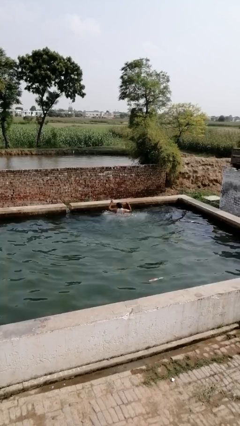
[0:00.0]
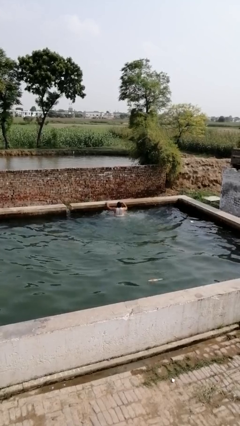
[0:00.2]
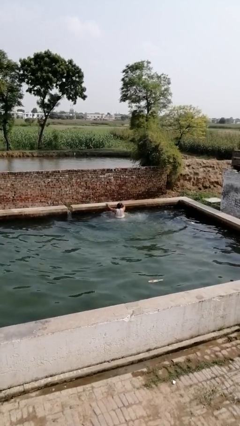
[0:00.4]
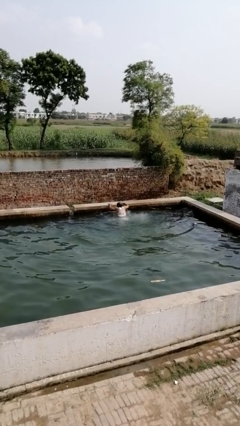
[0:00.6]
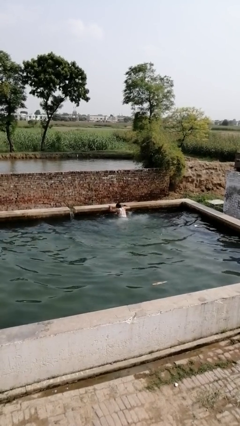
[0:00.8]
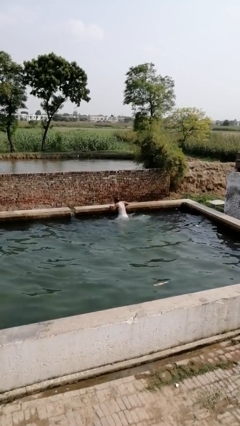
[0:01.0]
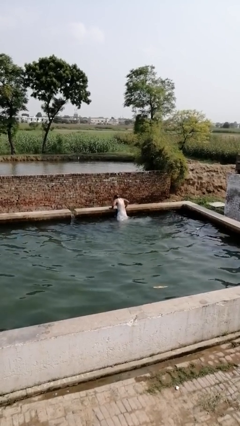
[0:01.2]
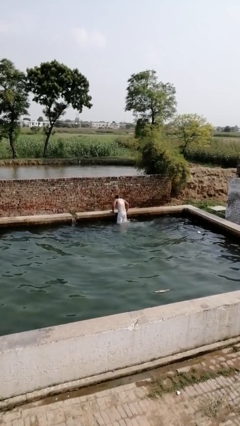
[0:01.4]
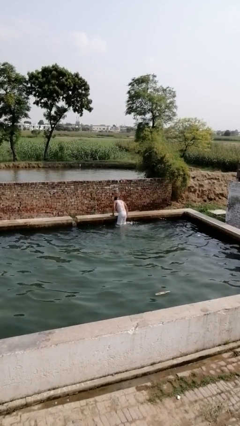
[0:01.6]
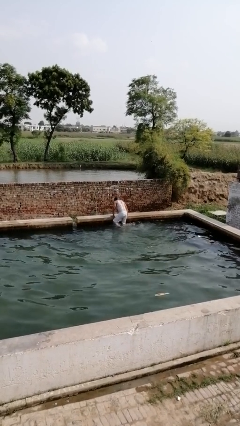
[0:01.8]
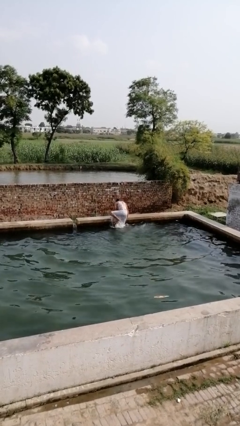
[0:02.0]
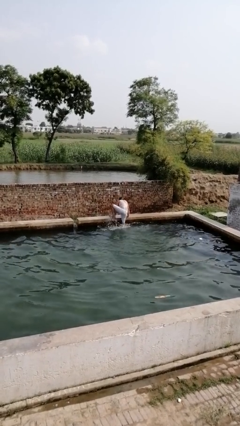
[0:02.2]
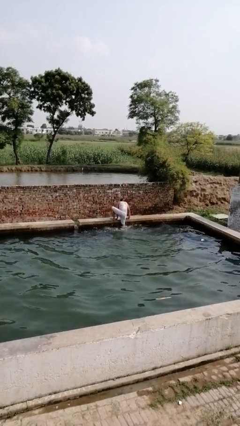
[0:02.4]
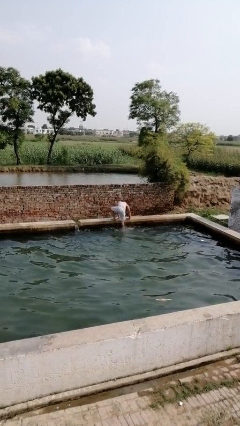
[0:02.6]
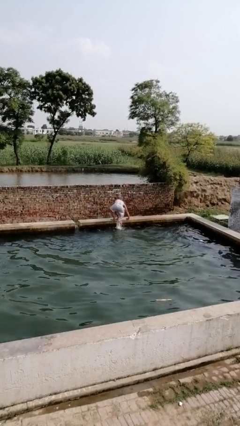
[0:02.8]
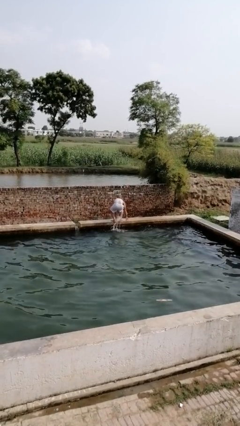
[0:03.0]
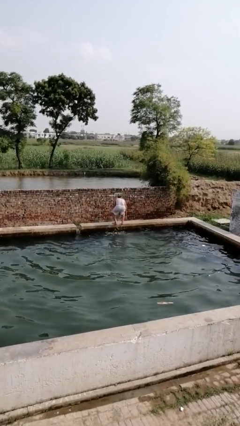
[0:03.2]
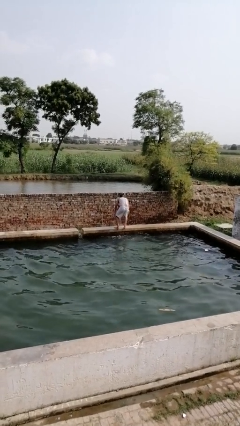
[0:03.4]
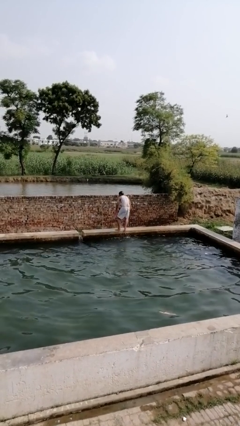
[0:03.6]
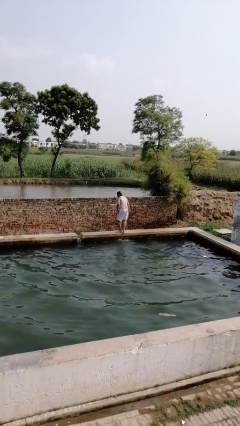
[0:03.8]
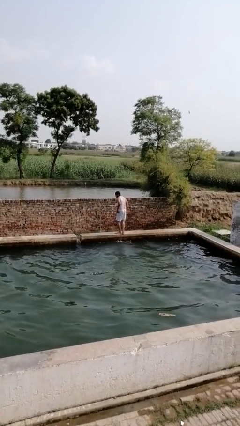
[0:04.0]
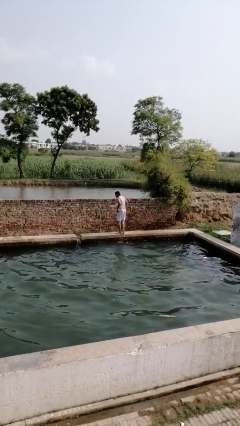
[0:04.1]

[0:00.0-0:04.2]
person exits pool

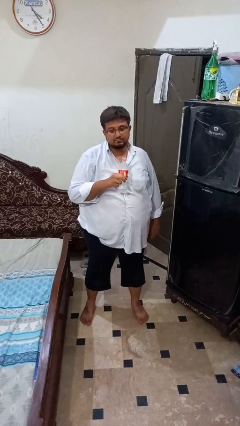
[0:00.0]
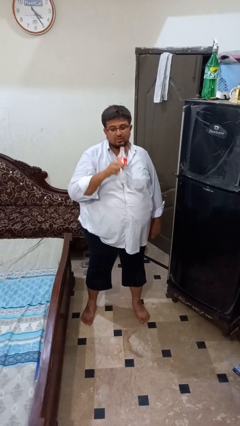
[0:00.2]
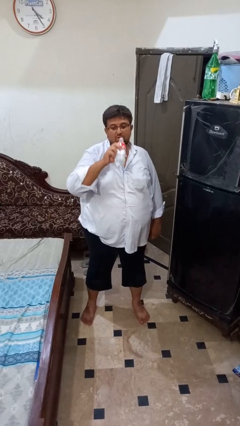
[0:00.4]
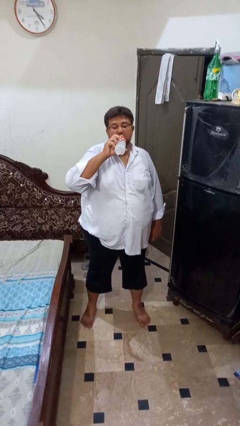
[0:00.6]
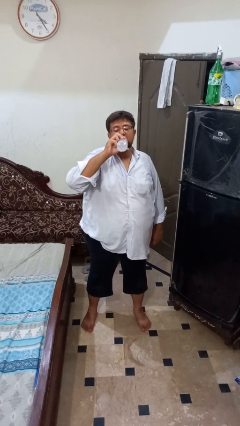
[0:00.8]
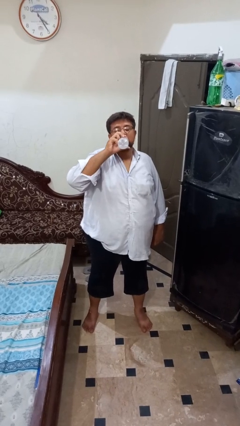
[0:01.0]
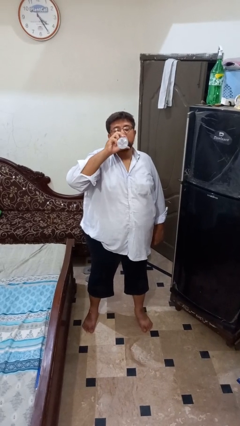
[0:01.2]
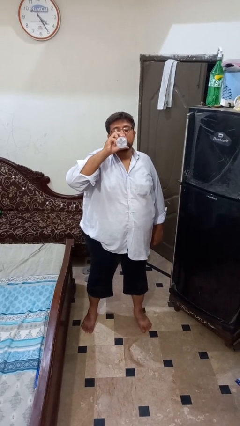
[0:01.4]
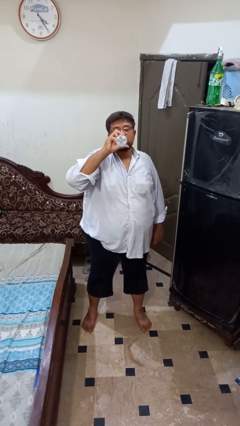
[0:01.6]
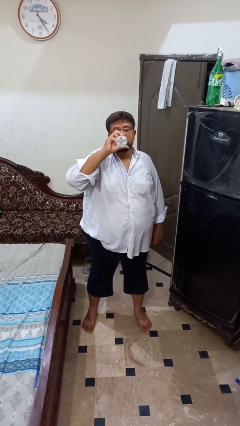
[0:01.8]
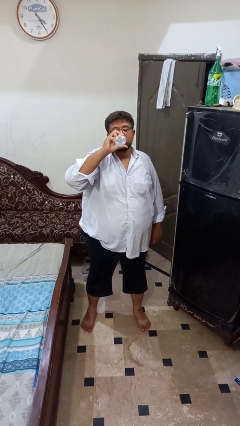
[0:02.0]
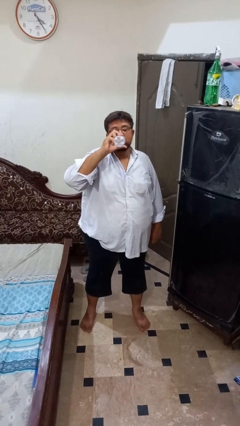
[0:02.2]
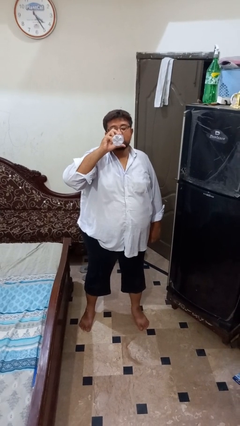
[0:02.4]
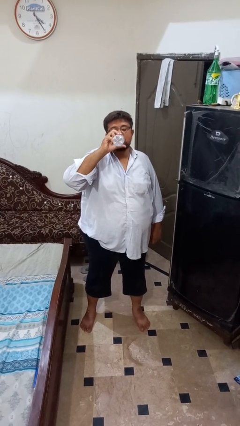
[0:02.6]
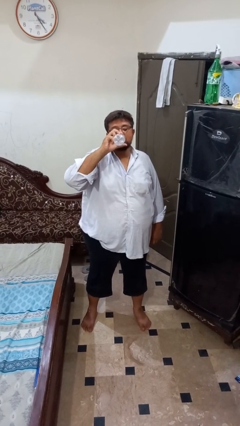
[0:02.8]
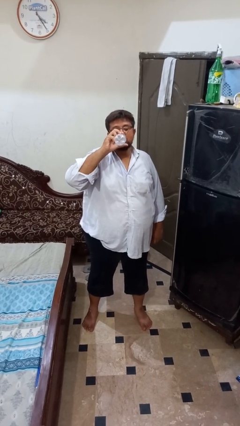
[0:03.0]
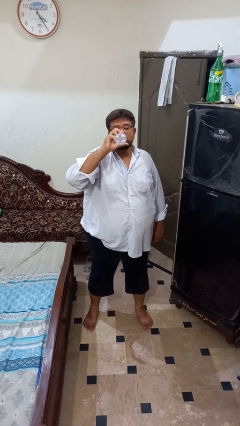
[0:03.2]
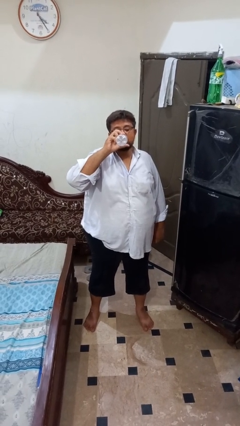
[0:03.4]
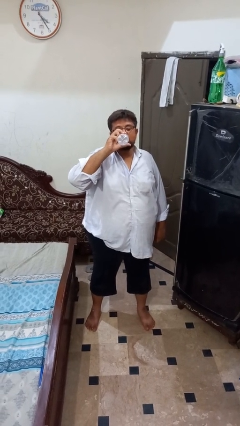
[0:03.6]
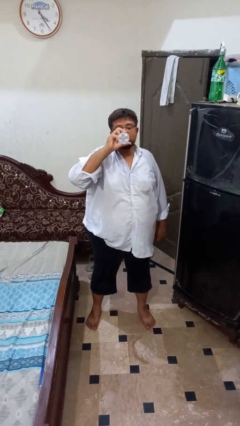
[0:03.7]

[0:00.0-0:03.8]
person drinks from bottle

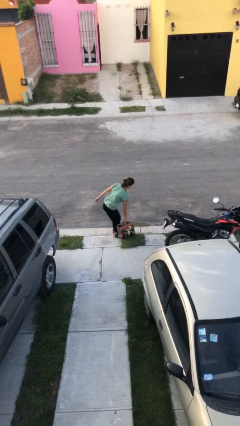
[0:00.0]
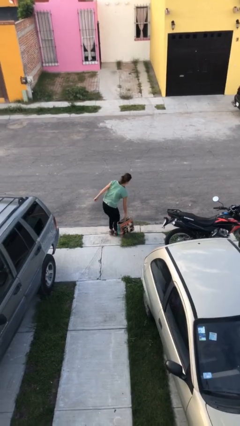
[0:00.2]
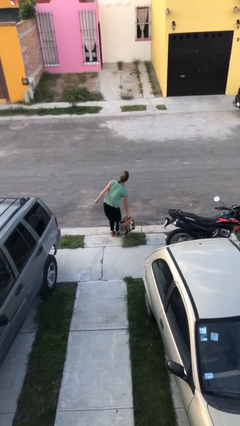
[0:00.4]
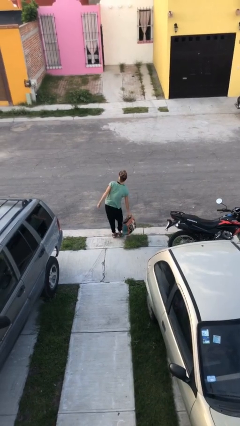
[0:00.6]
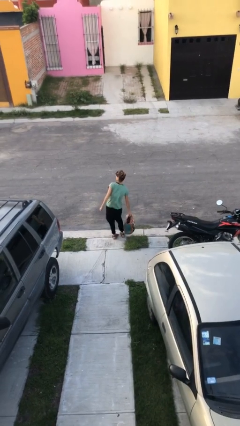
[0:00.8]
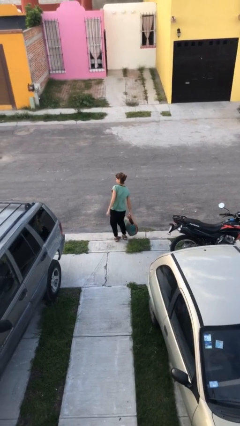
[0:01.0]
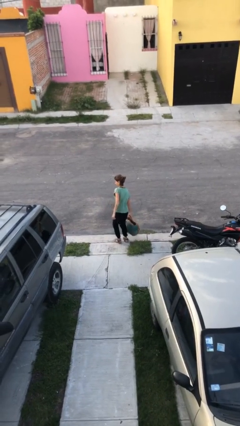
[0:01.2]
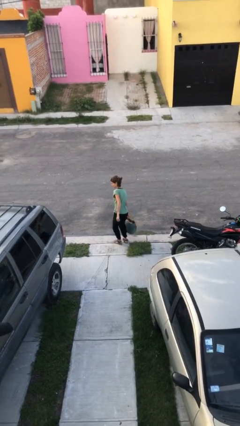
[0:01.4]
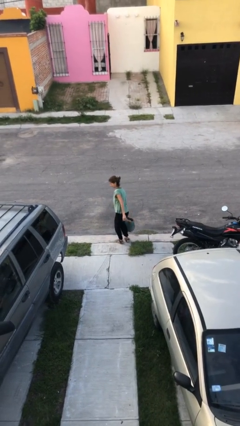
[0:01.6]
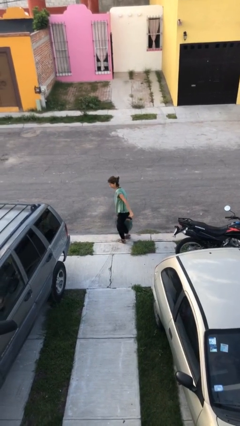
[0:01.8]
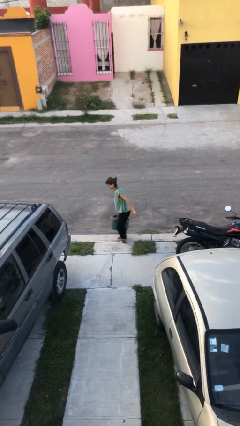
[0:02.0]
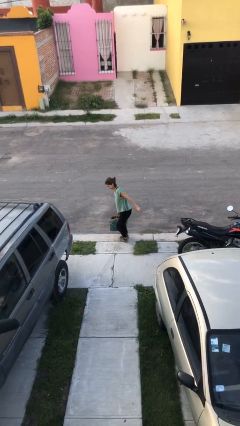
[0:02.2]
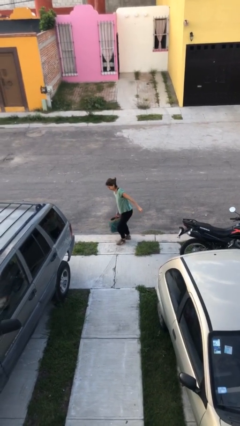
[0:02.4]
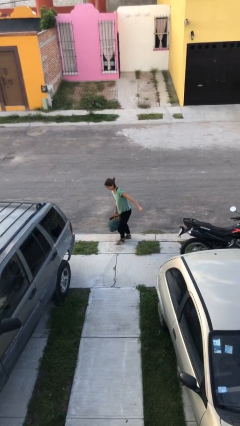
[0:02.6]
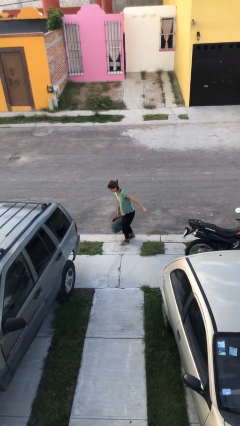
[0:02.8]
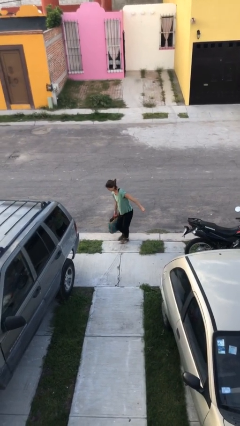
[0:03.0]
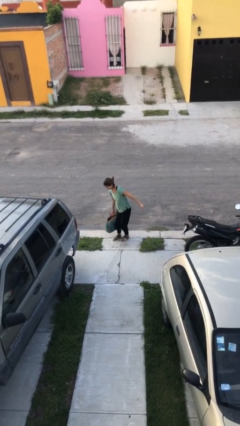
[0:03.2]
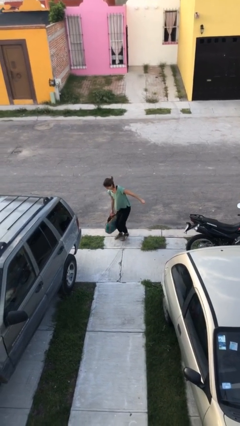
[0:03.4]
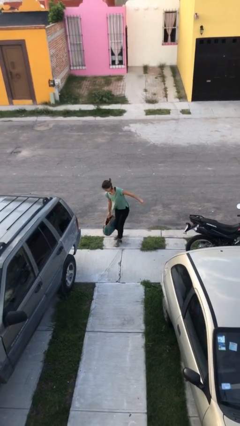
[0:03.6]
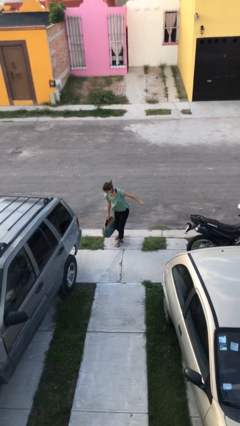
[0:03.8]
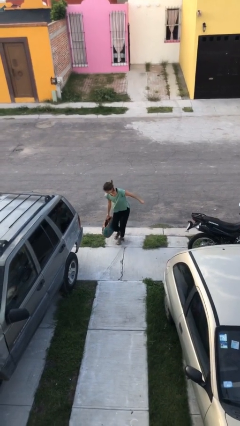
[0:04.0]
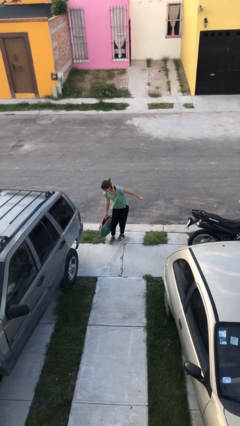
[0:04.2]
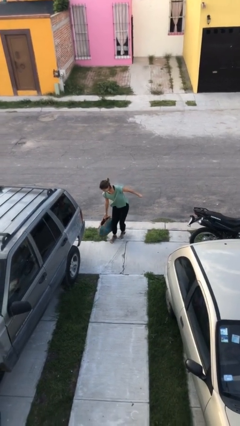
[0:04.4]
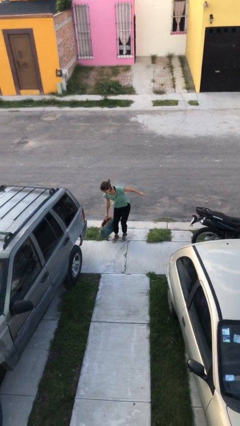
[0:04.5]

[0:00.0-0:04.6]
person carries heavy object

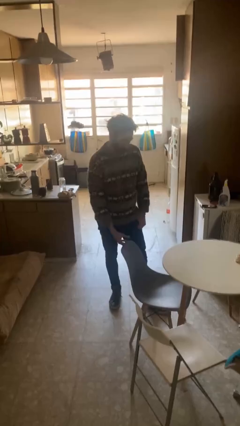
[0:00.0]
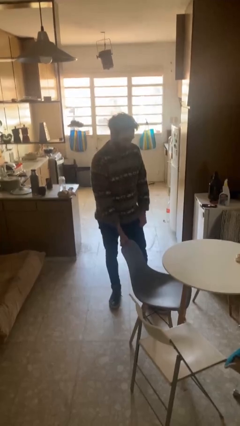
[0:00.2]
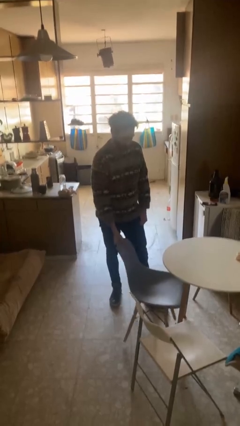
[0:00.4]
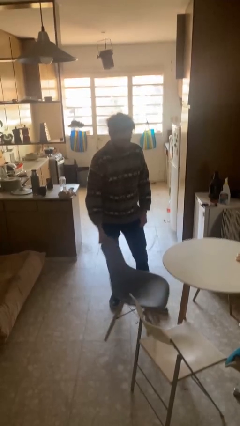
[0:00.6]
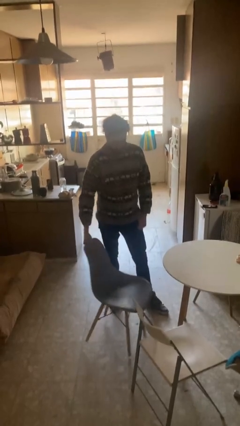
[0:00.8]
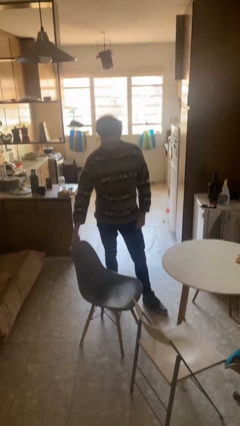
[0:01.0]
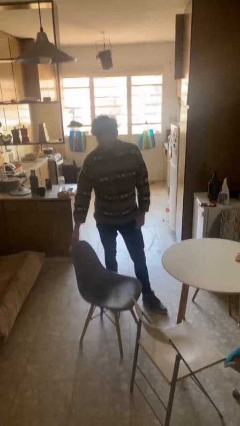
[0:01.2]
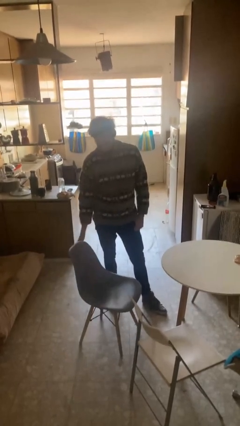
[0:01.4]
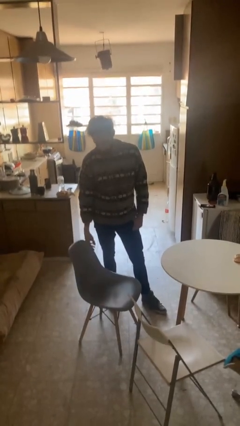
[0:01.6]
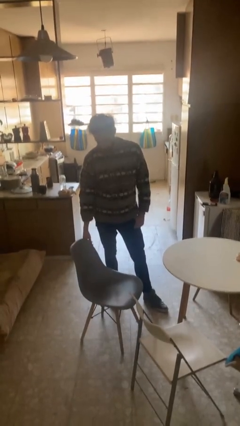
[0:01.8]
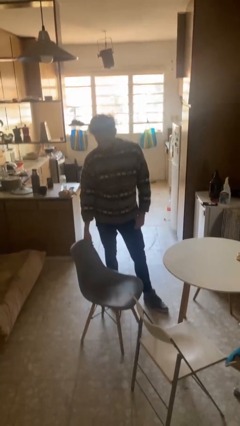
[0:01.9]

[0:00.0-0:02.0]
person pulls out chair

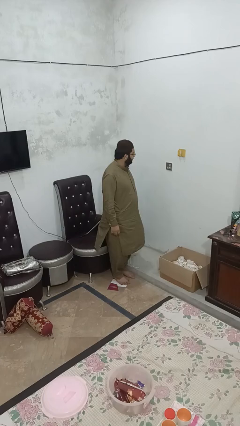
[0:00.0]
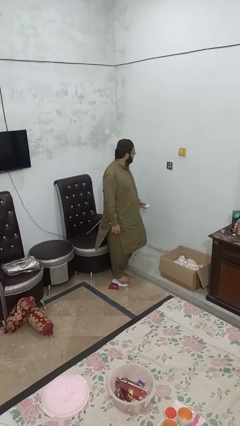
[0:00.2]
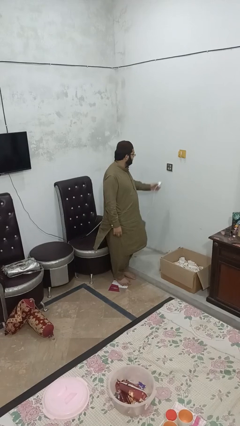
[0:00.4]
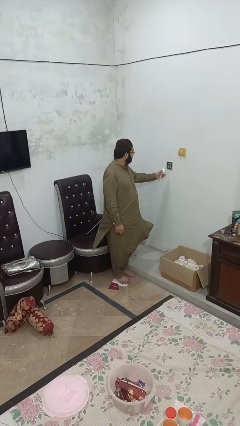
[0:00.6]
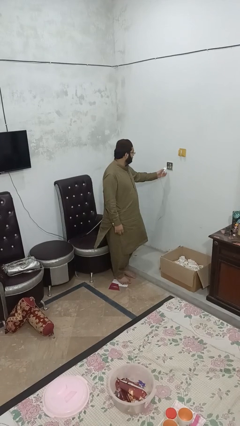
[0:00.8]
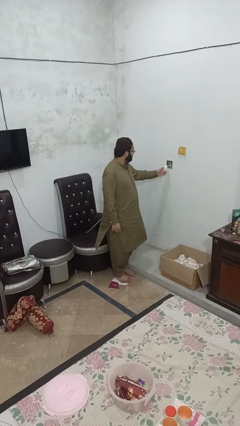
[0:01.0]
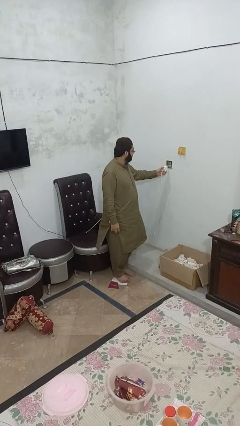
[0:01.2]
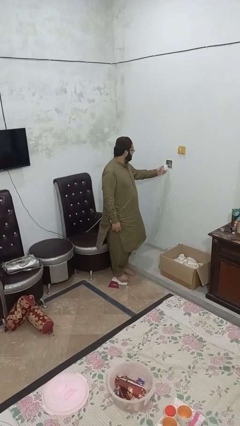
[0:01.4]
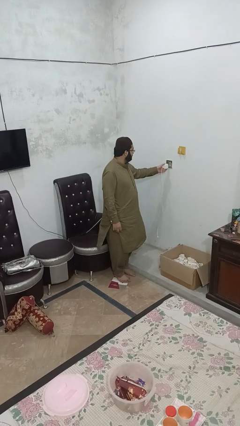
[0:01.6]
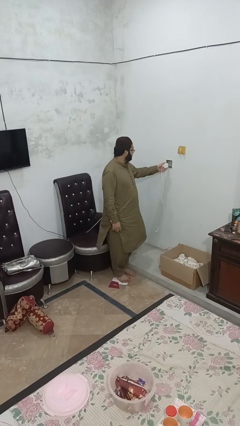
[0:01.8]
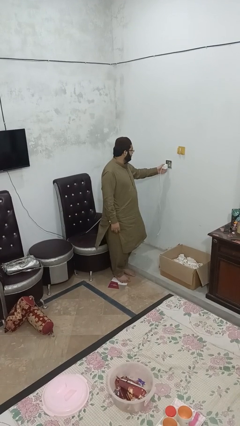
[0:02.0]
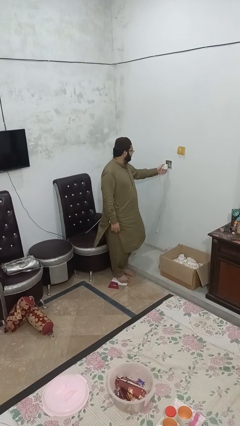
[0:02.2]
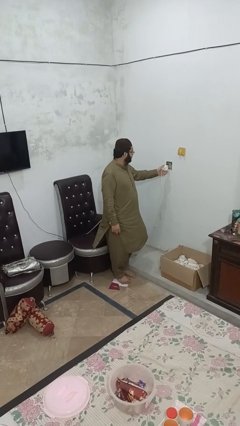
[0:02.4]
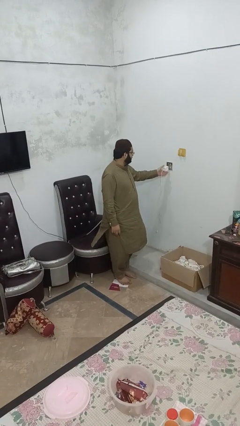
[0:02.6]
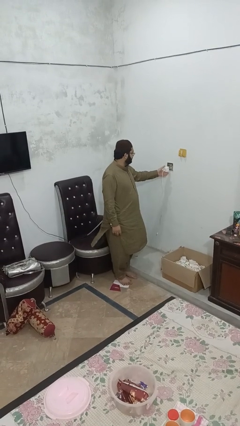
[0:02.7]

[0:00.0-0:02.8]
person plugs into electrical socket

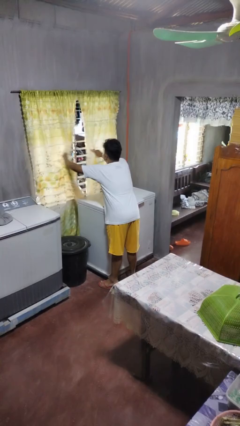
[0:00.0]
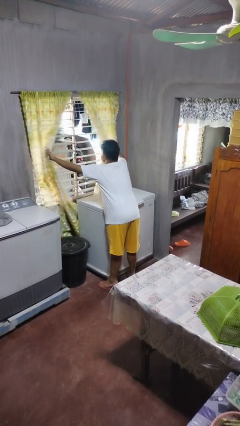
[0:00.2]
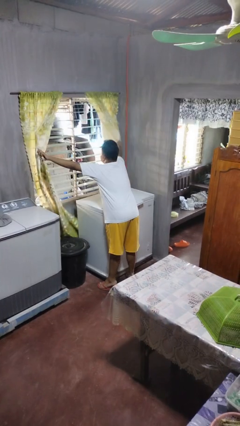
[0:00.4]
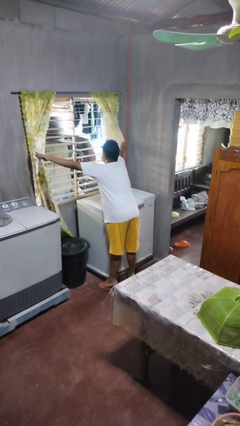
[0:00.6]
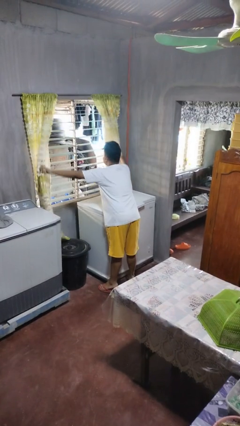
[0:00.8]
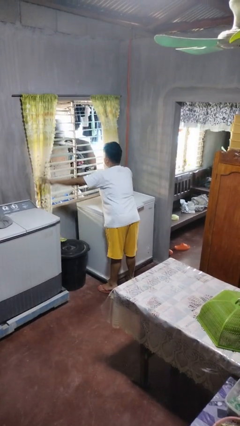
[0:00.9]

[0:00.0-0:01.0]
person opens curtains
